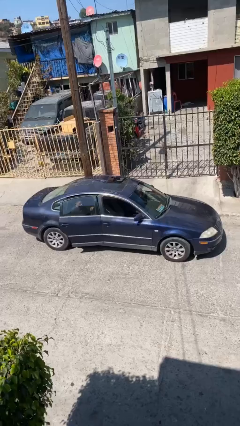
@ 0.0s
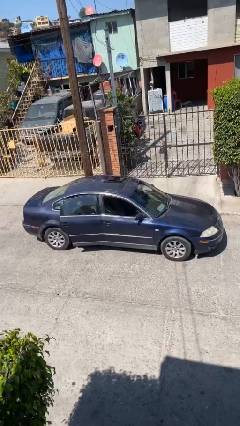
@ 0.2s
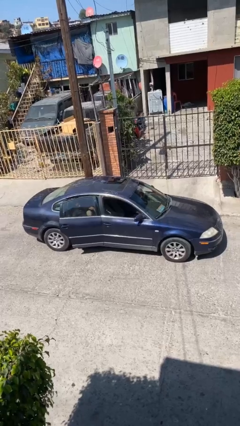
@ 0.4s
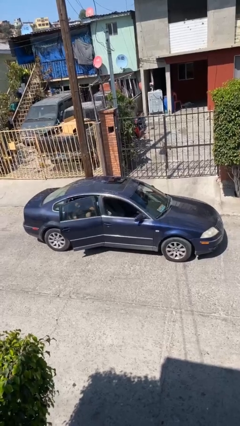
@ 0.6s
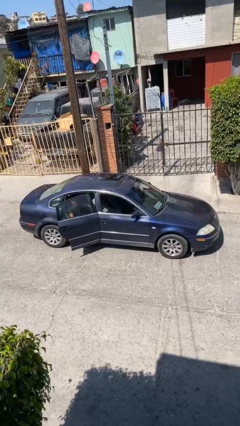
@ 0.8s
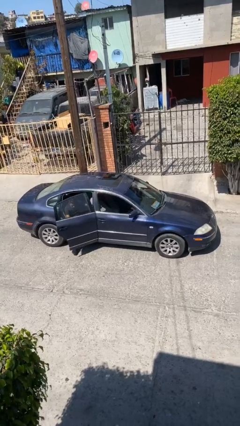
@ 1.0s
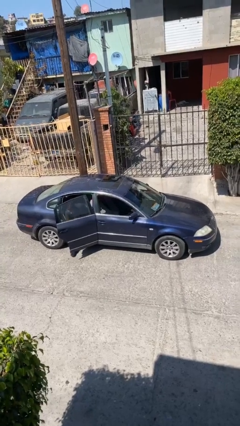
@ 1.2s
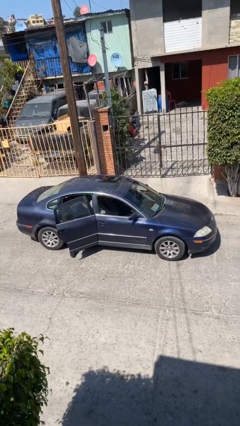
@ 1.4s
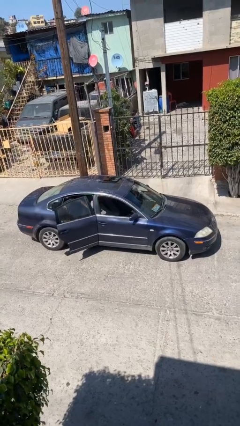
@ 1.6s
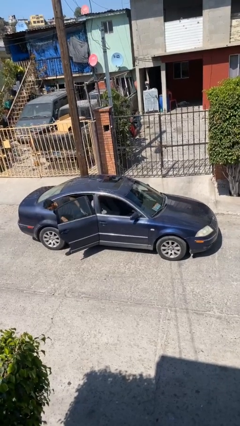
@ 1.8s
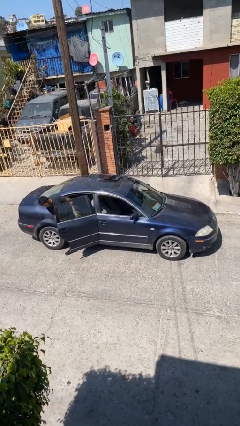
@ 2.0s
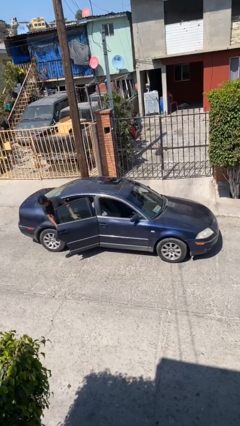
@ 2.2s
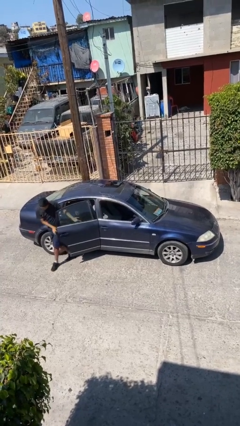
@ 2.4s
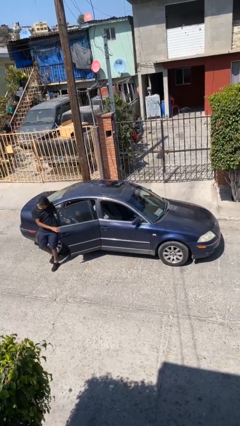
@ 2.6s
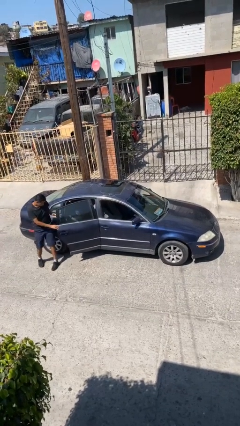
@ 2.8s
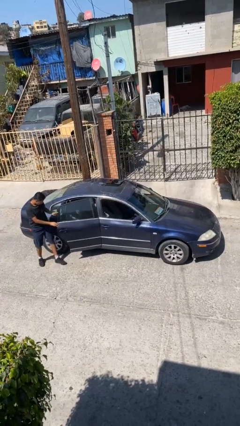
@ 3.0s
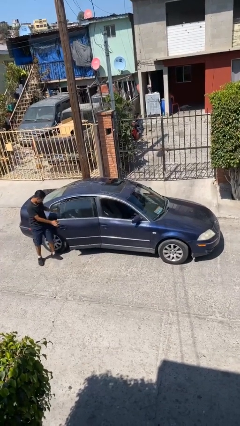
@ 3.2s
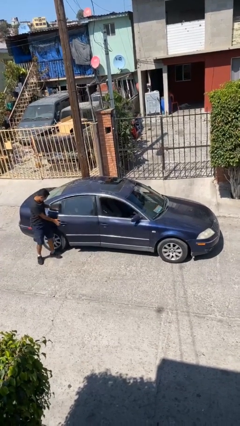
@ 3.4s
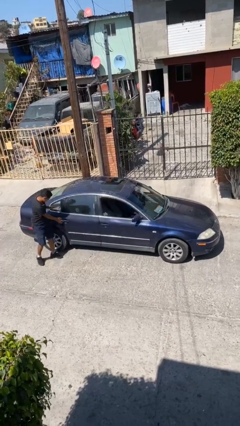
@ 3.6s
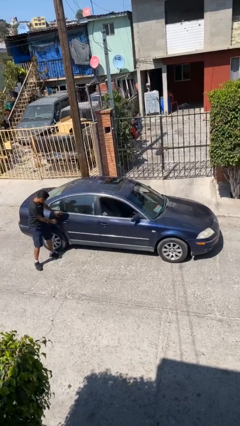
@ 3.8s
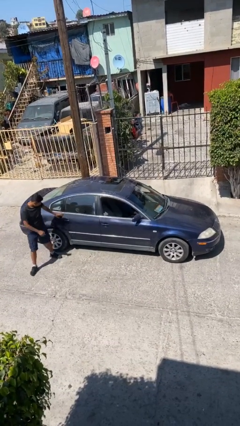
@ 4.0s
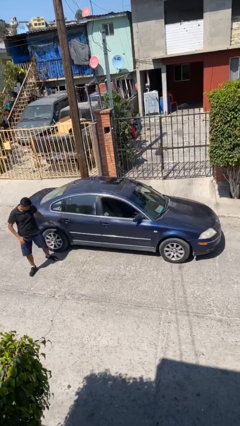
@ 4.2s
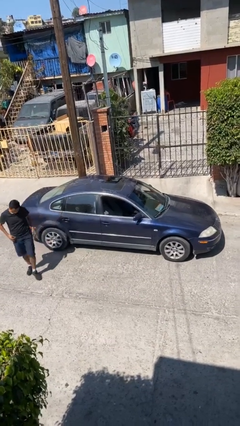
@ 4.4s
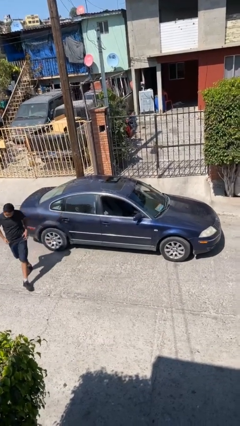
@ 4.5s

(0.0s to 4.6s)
car drops off person

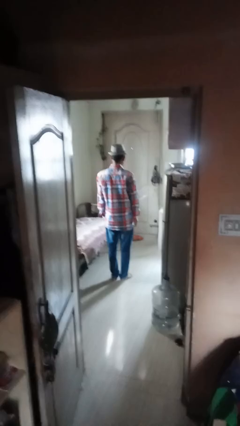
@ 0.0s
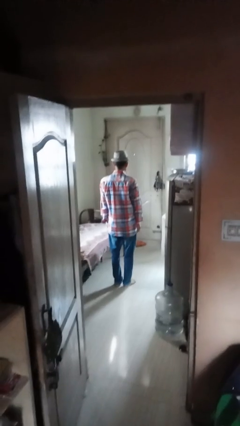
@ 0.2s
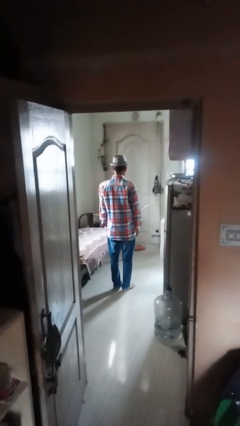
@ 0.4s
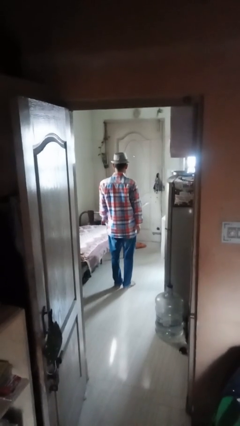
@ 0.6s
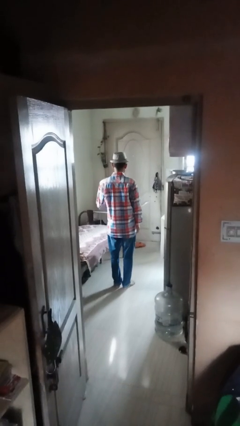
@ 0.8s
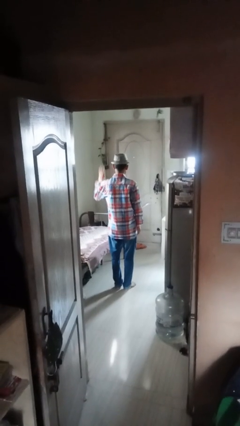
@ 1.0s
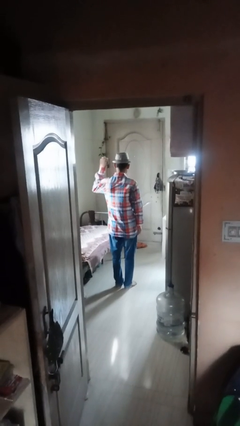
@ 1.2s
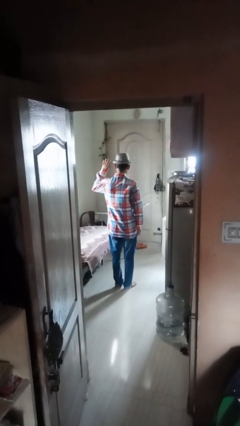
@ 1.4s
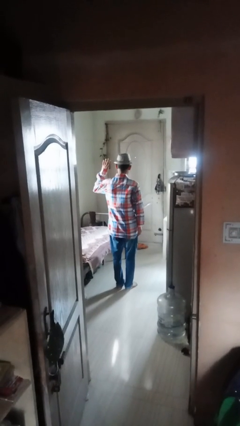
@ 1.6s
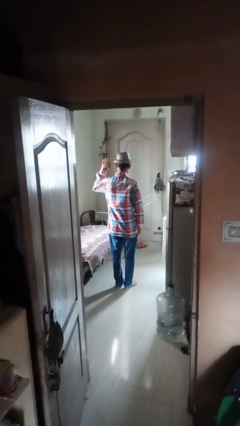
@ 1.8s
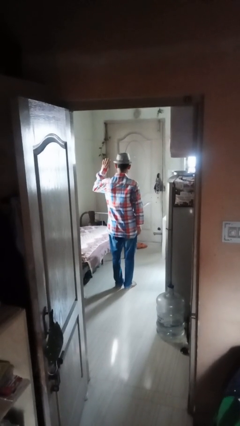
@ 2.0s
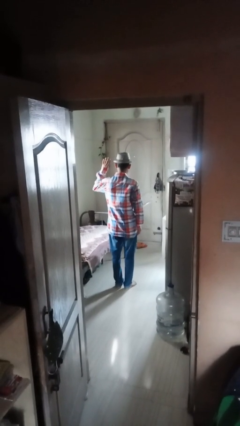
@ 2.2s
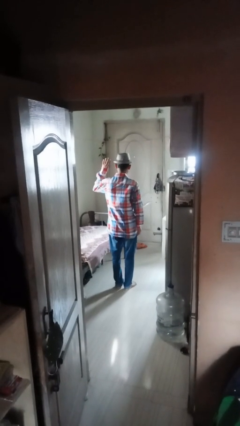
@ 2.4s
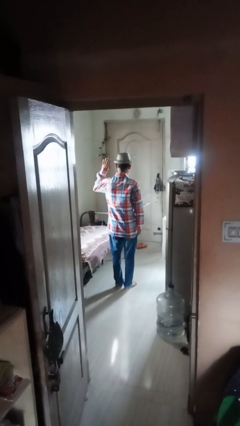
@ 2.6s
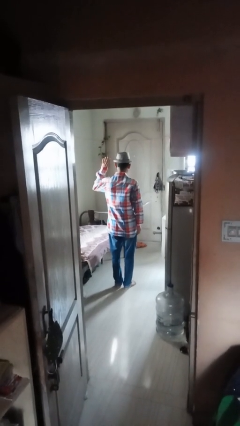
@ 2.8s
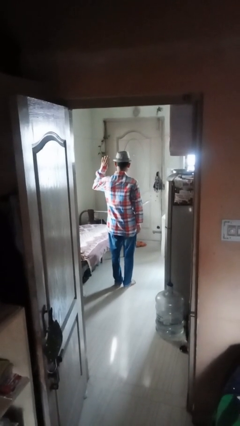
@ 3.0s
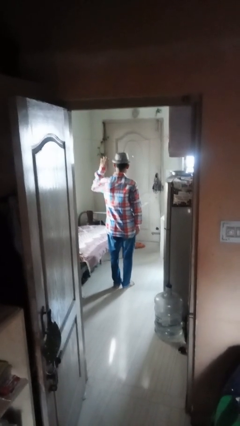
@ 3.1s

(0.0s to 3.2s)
person gestures number four

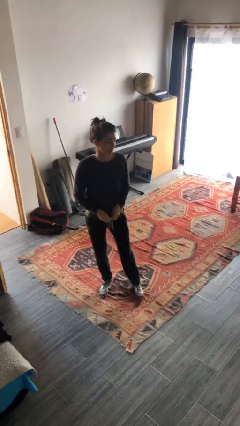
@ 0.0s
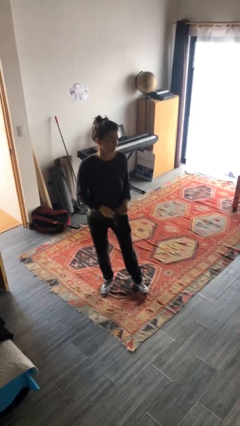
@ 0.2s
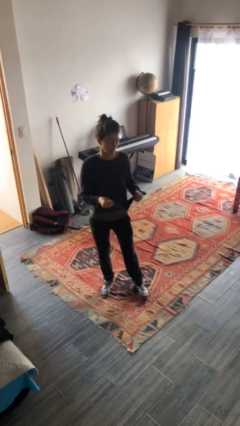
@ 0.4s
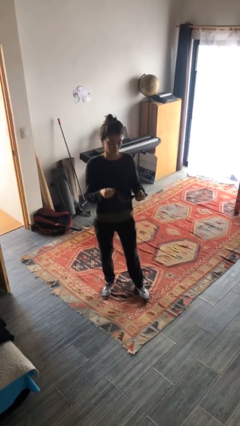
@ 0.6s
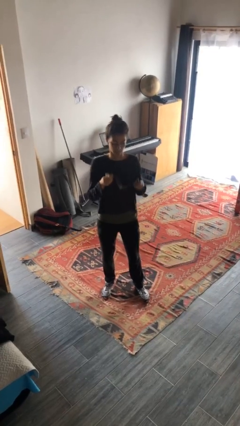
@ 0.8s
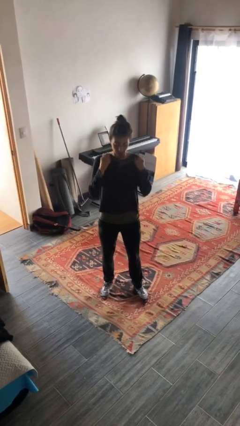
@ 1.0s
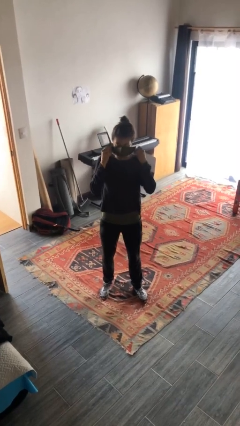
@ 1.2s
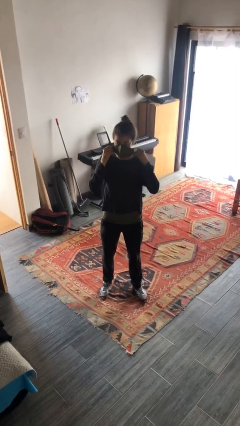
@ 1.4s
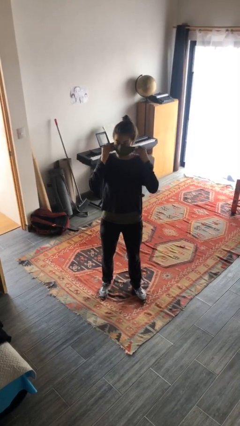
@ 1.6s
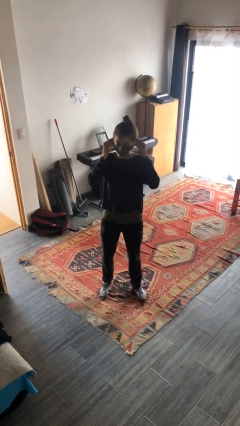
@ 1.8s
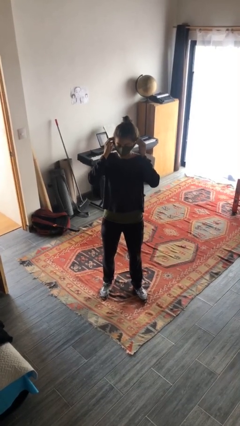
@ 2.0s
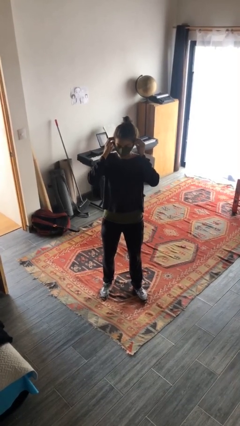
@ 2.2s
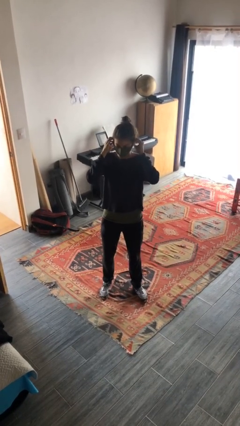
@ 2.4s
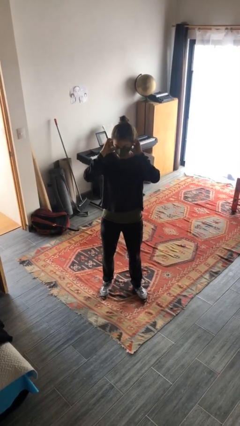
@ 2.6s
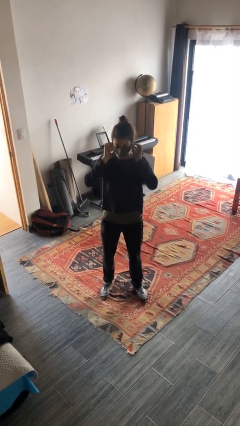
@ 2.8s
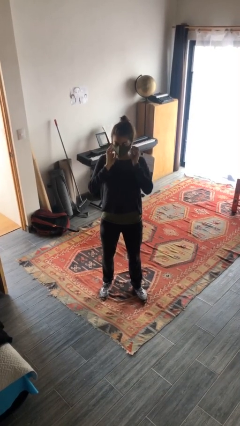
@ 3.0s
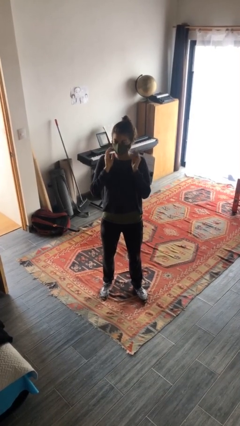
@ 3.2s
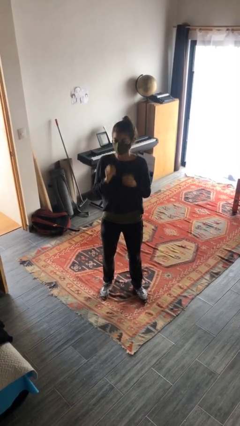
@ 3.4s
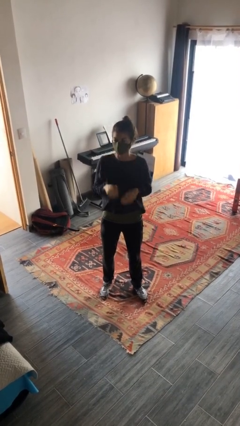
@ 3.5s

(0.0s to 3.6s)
person puts on facemask

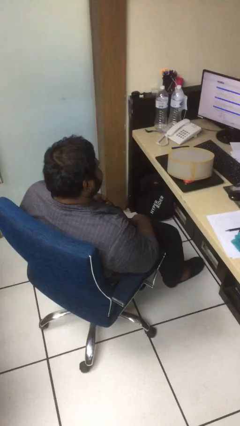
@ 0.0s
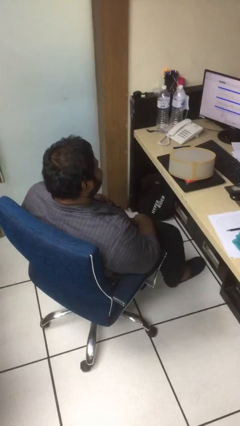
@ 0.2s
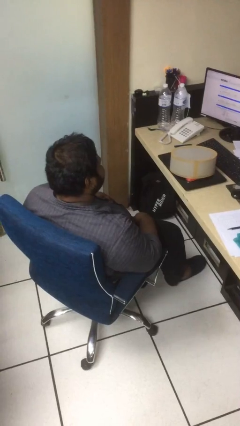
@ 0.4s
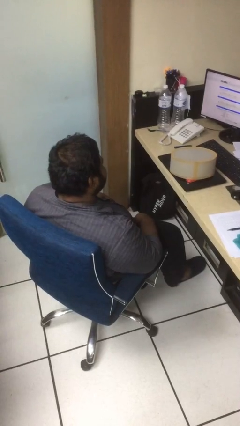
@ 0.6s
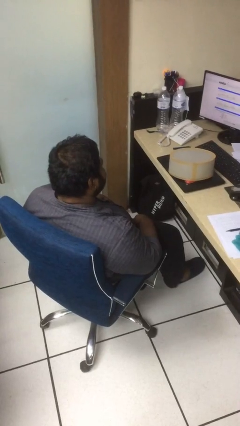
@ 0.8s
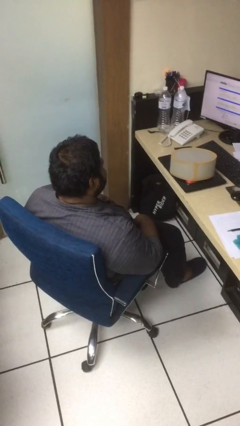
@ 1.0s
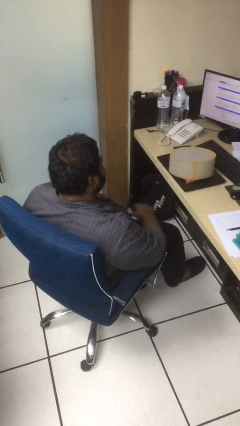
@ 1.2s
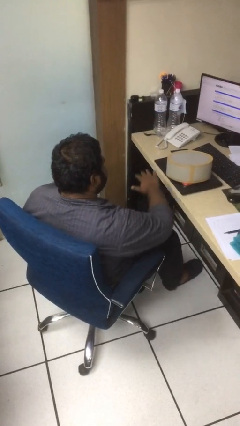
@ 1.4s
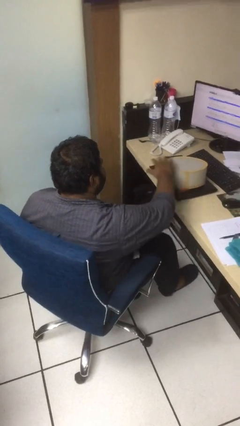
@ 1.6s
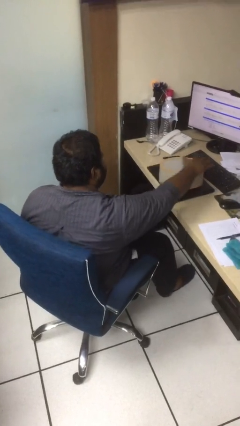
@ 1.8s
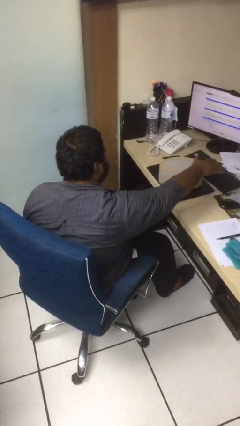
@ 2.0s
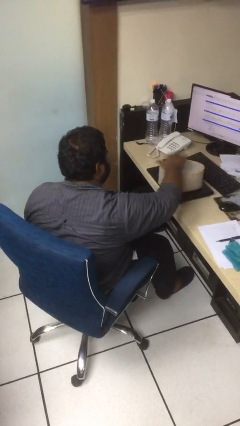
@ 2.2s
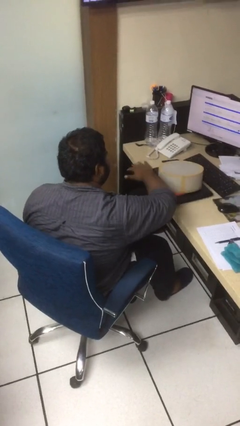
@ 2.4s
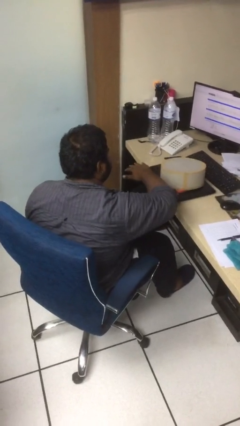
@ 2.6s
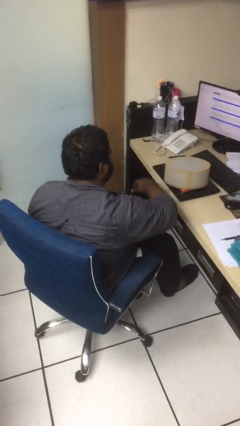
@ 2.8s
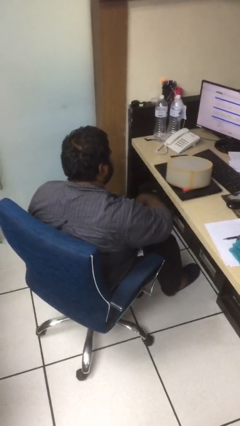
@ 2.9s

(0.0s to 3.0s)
person waves hand over object

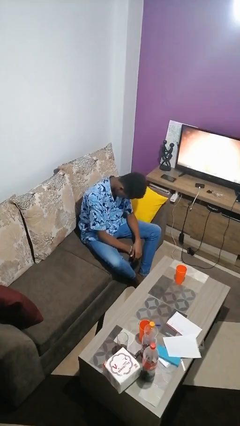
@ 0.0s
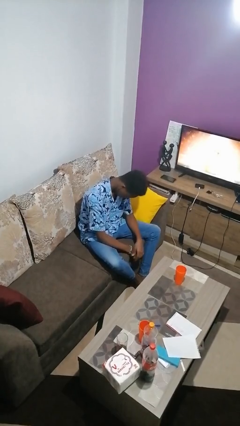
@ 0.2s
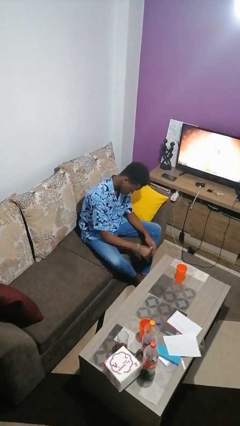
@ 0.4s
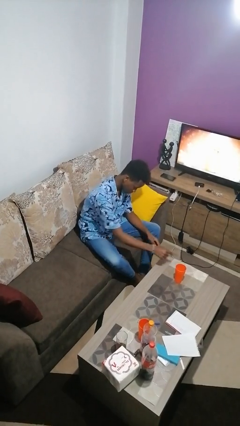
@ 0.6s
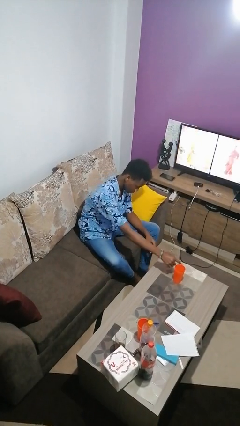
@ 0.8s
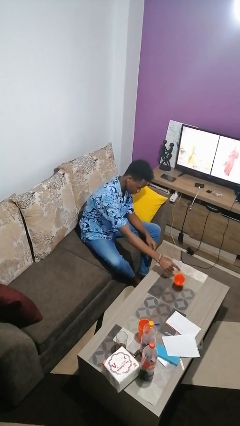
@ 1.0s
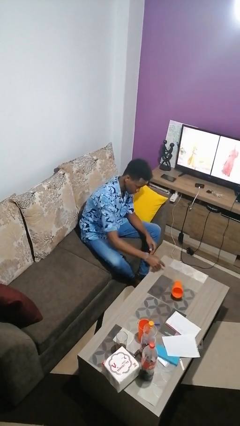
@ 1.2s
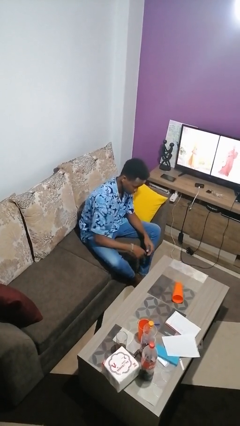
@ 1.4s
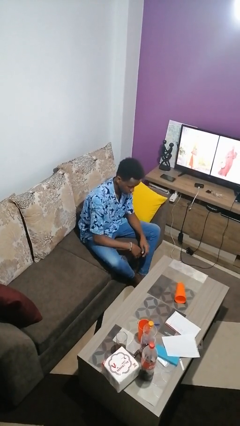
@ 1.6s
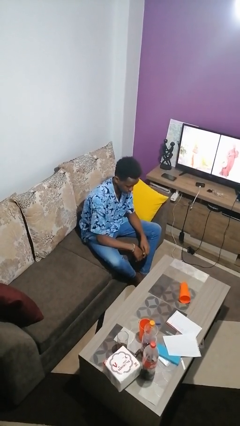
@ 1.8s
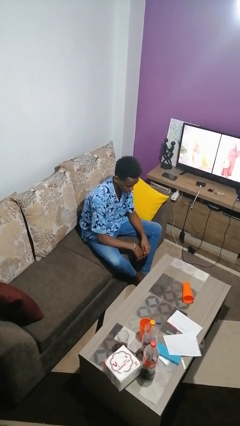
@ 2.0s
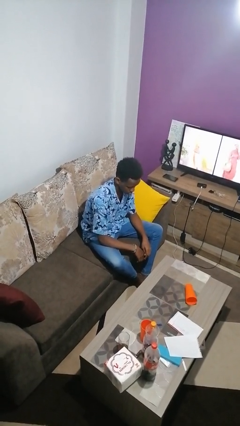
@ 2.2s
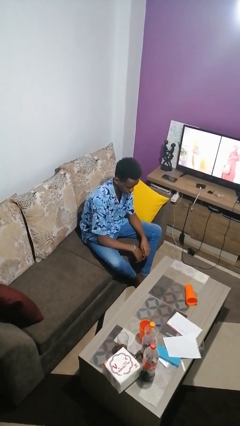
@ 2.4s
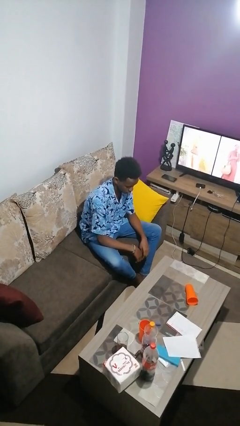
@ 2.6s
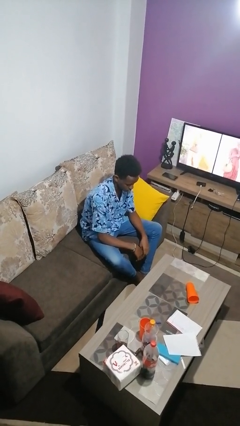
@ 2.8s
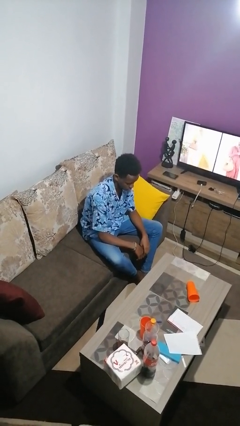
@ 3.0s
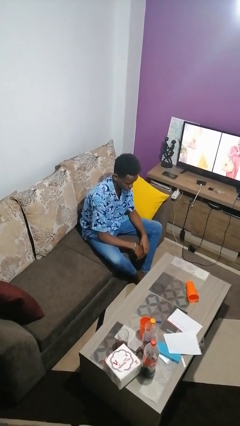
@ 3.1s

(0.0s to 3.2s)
person knocks over glass
